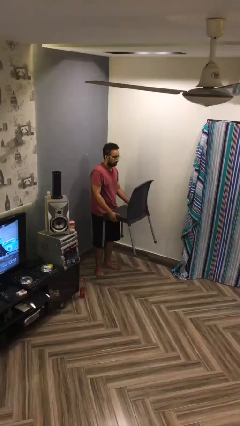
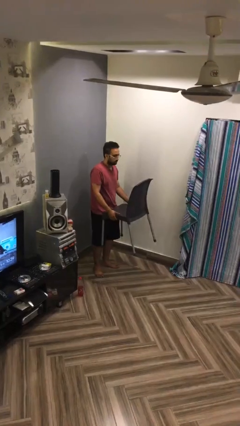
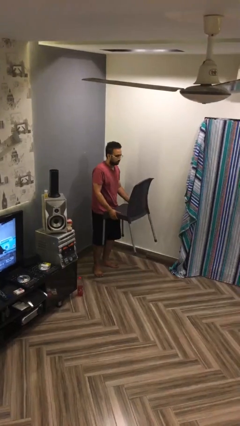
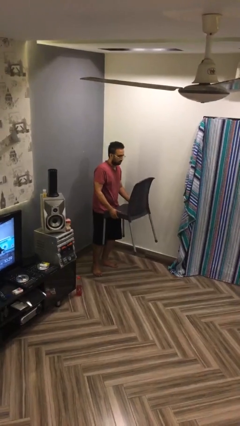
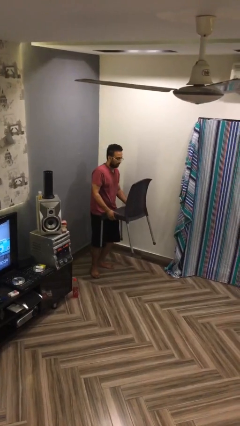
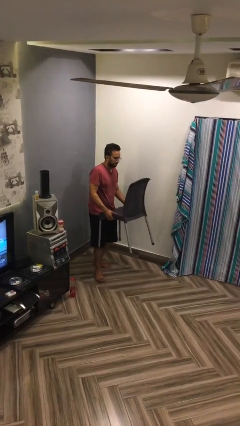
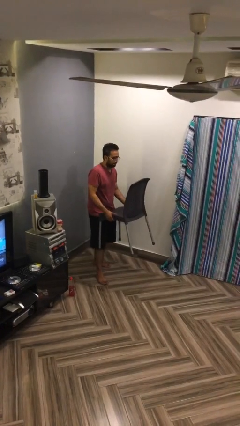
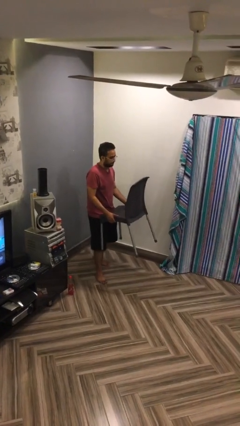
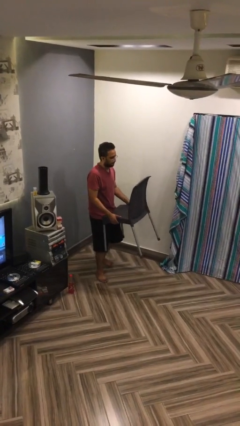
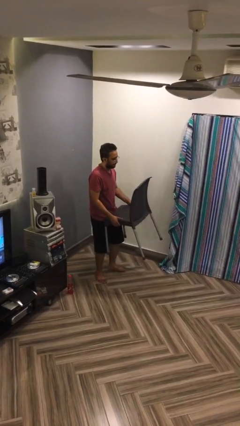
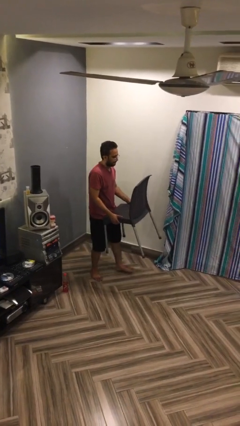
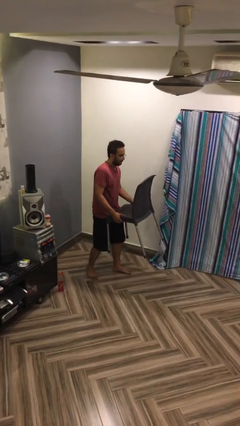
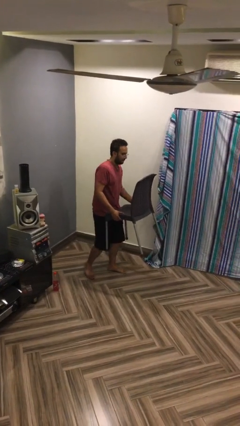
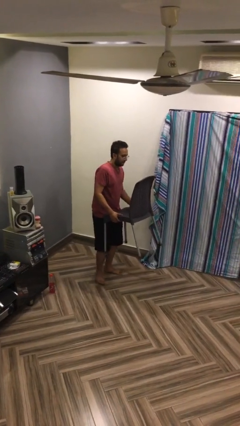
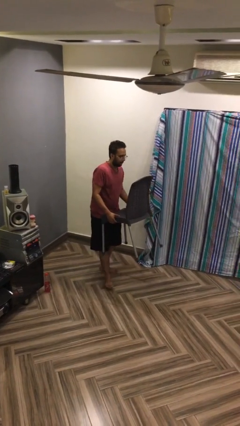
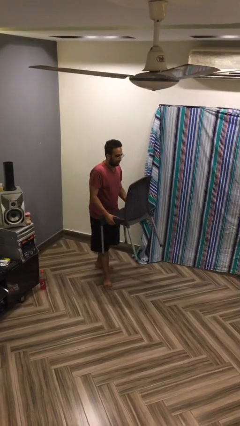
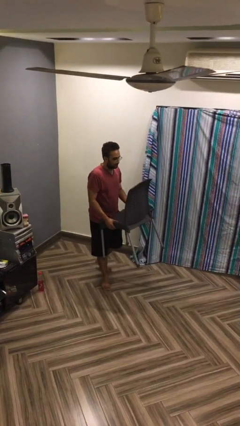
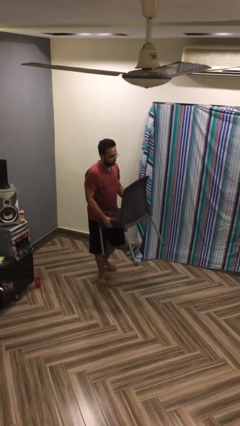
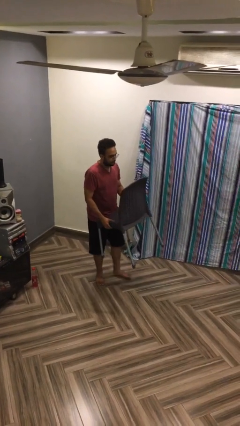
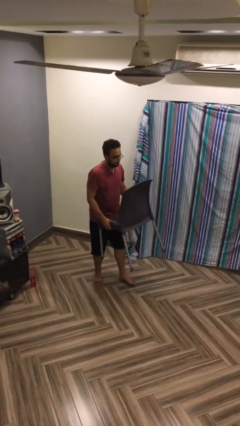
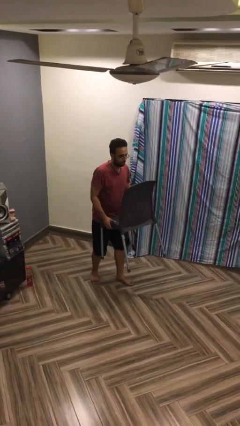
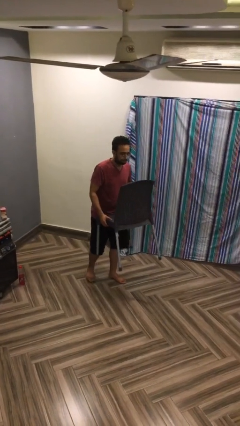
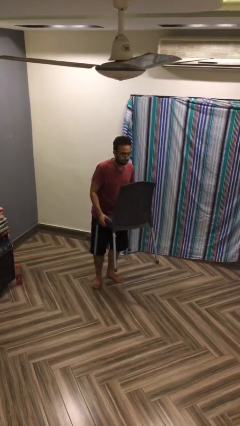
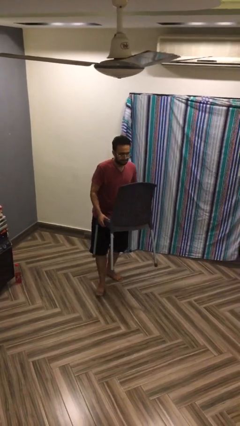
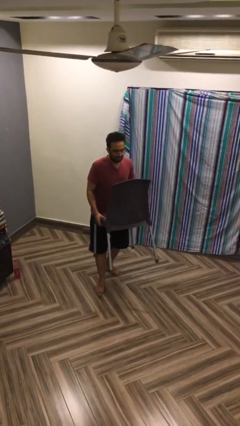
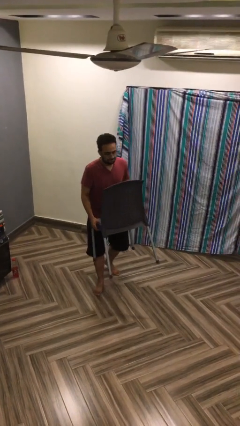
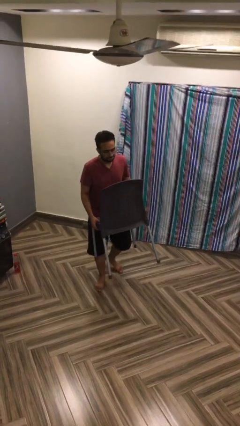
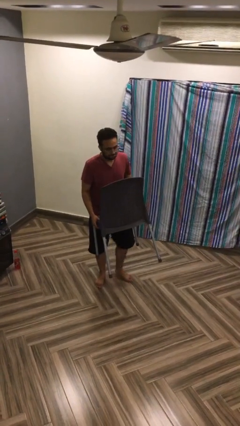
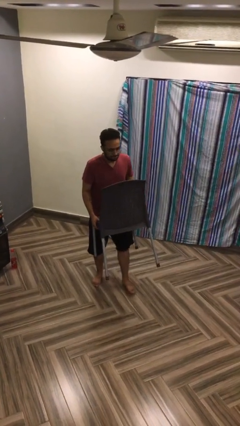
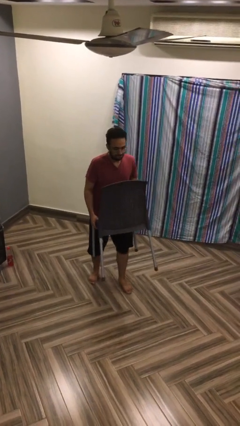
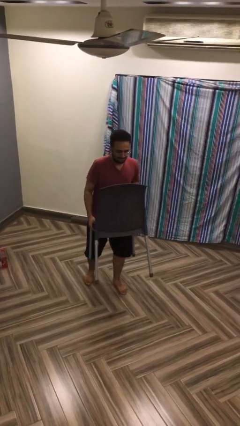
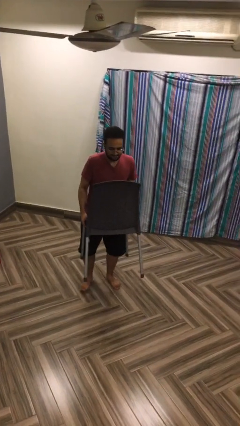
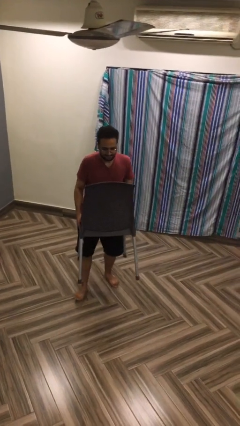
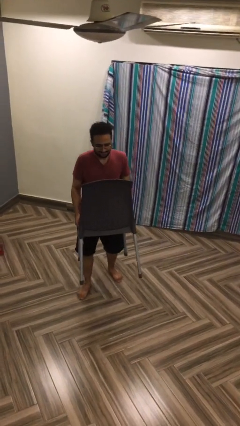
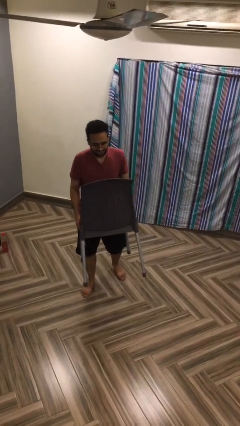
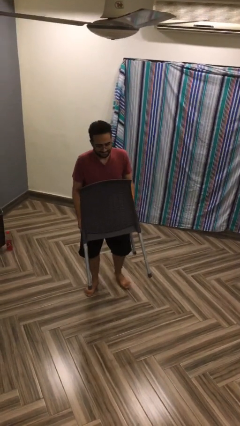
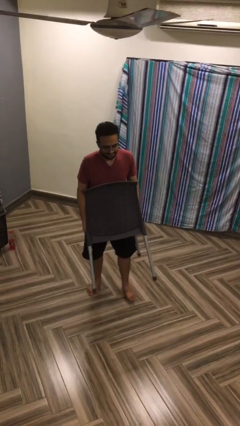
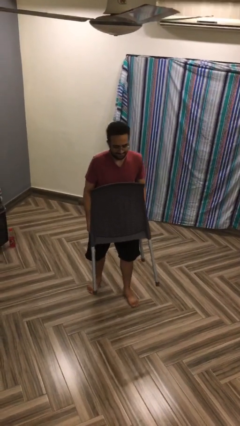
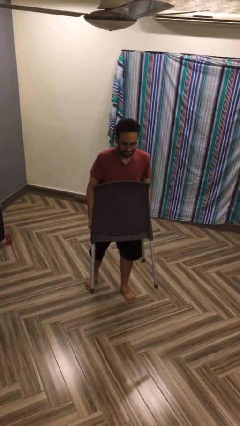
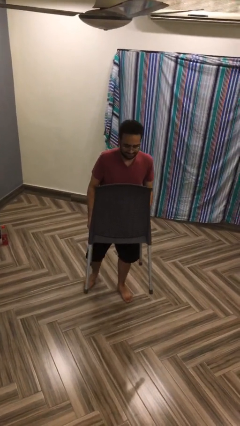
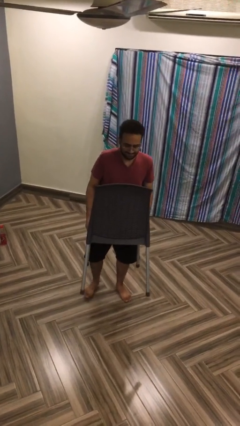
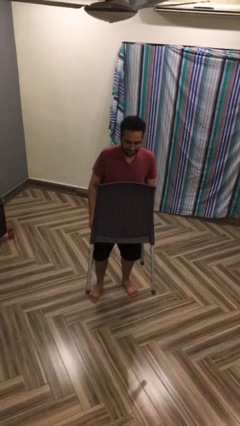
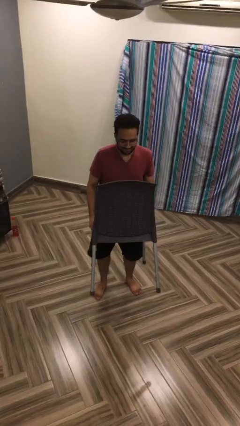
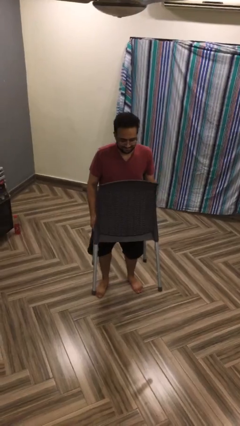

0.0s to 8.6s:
person carries heavy object

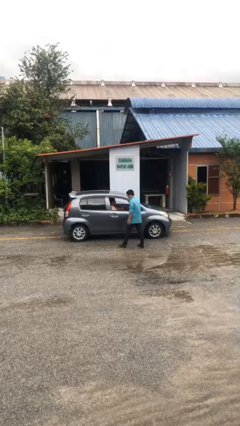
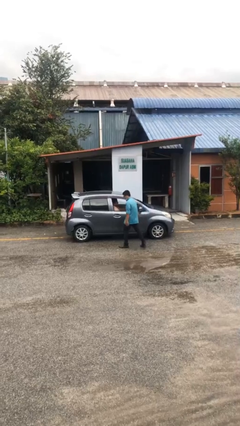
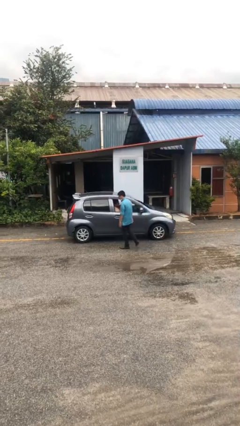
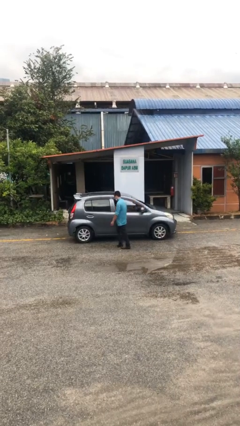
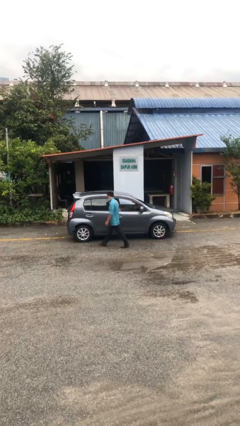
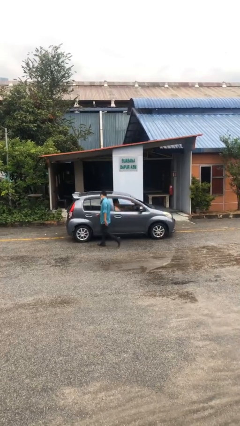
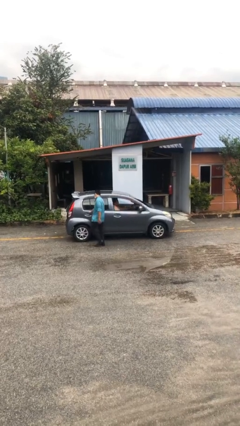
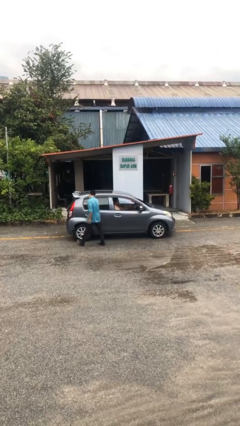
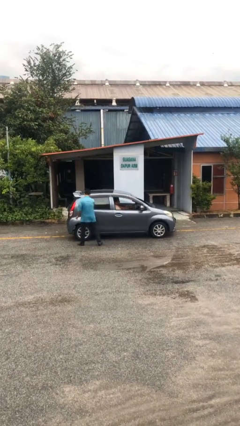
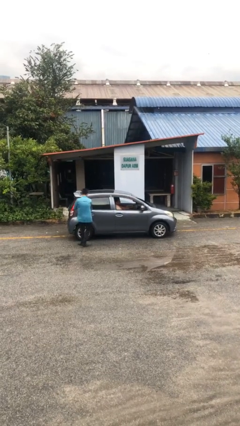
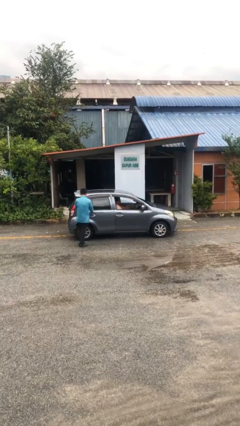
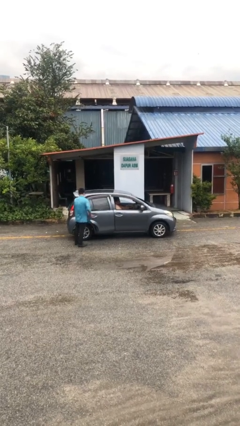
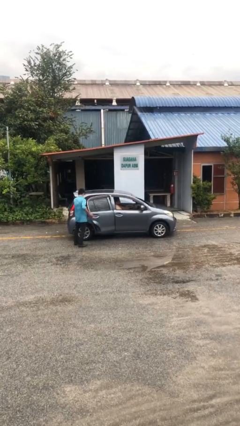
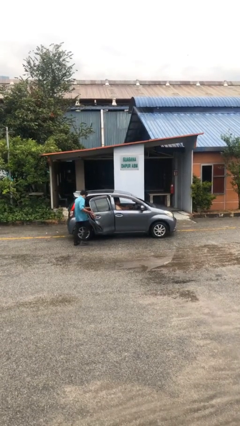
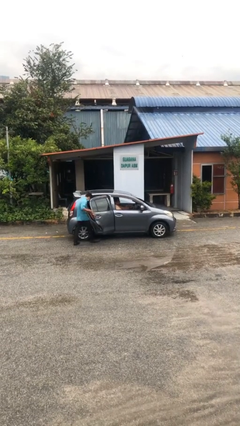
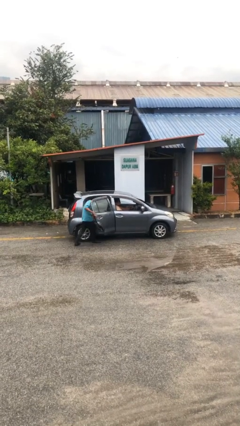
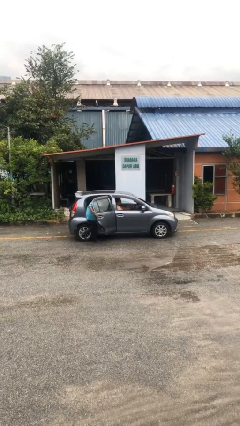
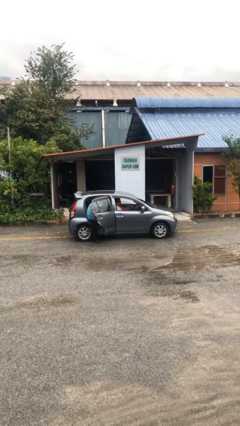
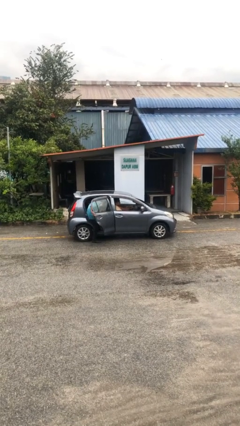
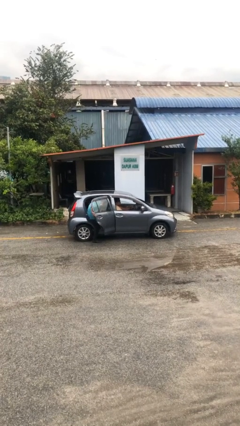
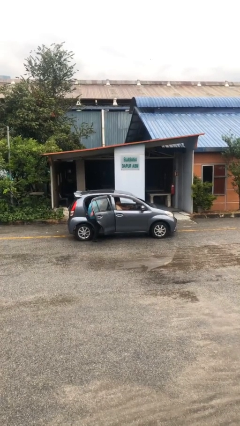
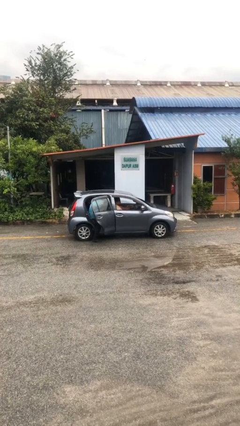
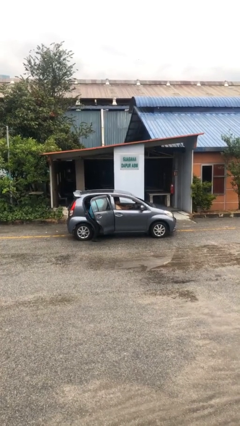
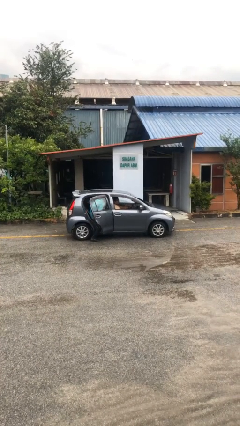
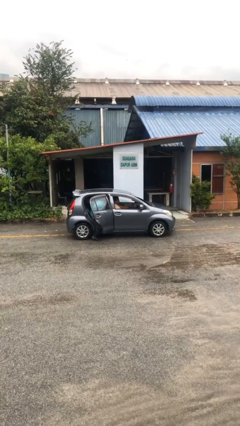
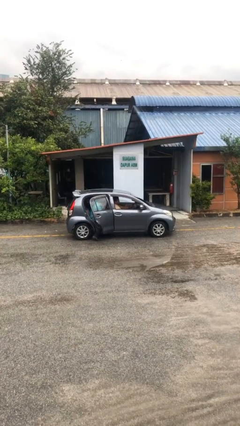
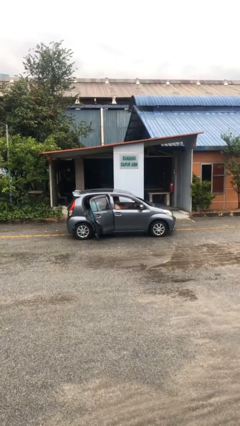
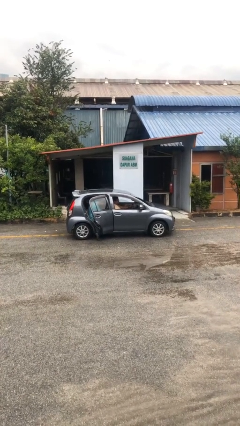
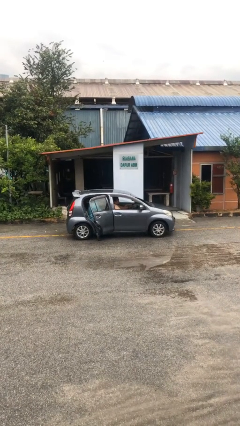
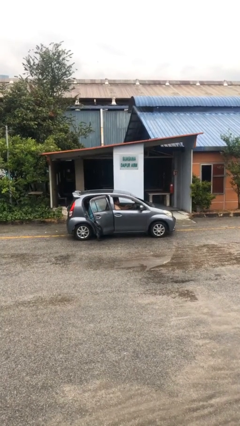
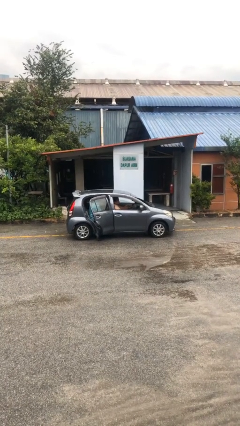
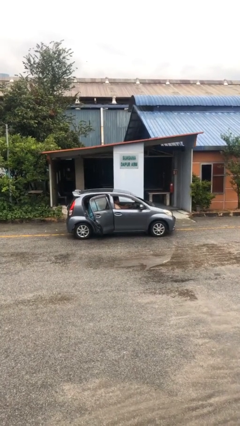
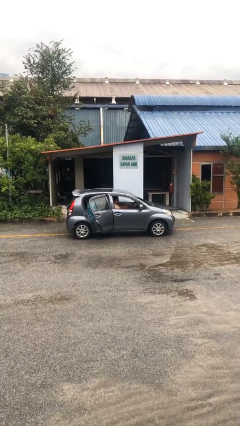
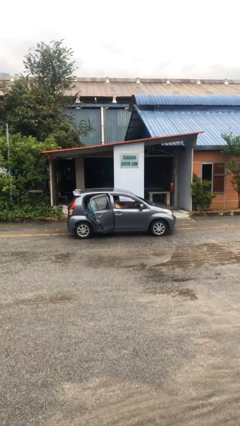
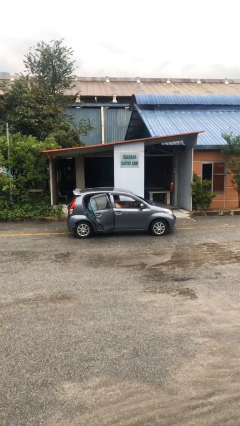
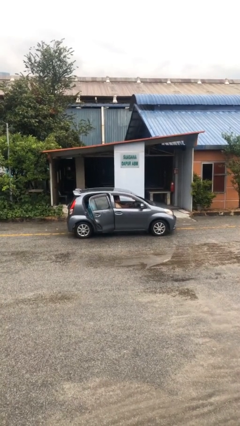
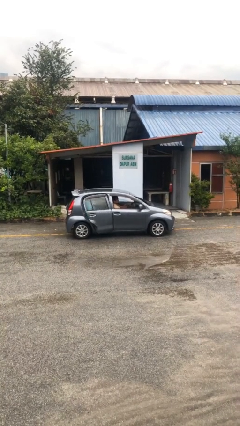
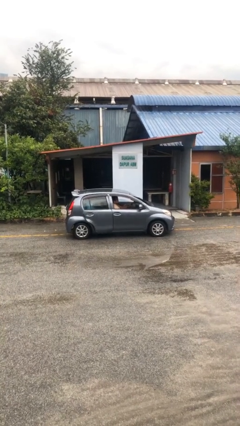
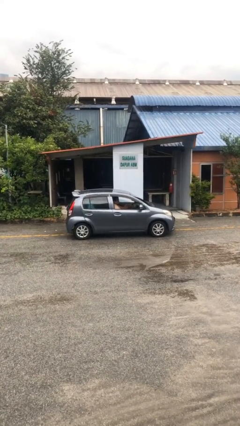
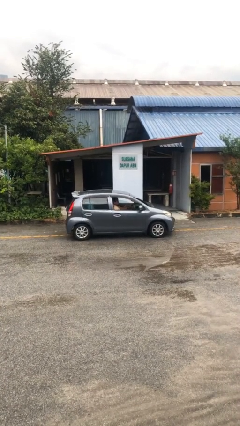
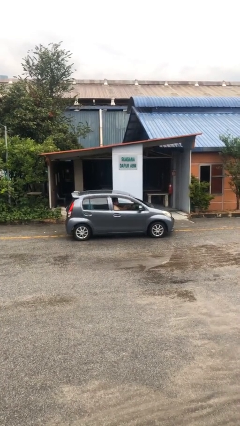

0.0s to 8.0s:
car picks up person

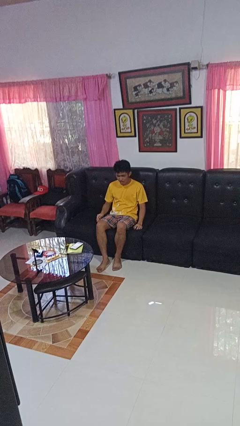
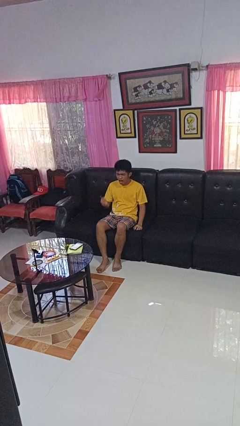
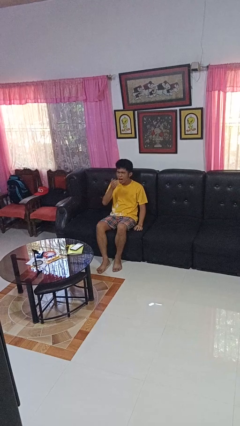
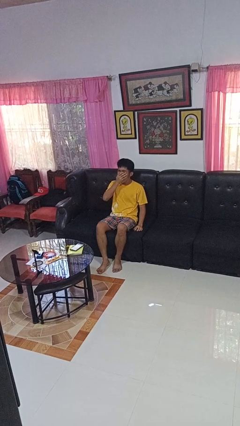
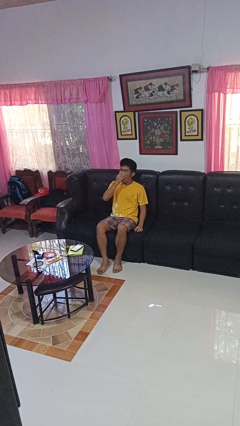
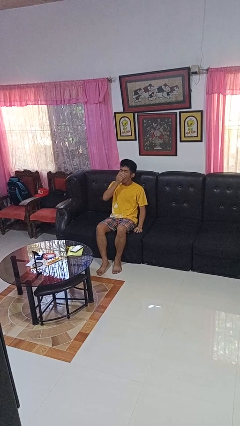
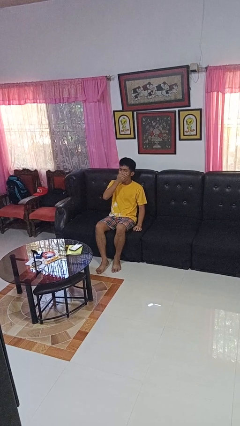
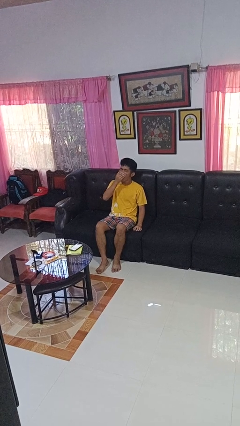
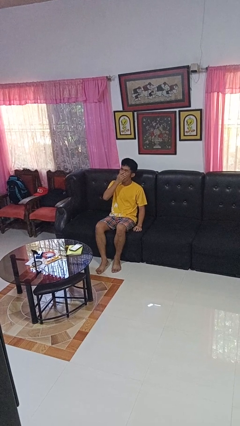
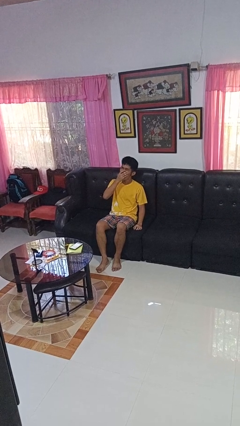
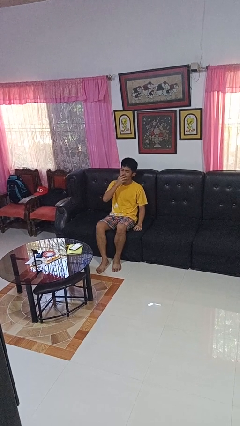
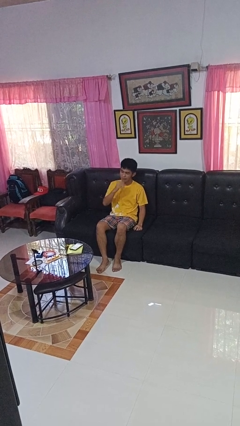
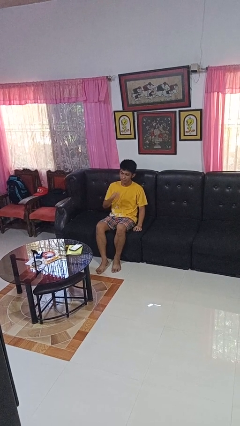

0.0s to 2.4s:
person yawns
